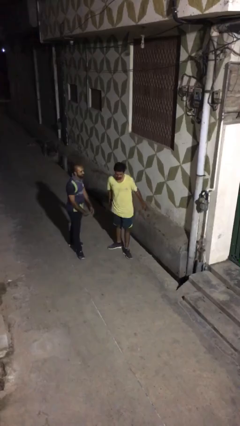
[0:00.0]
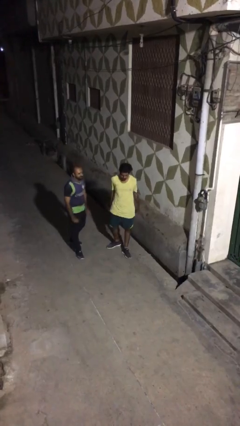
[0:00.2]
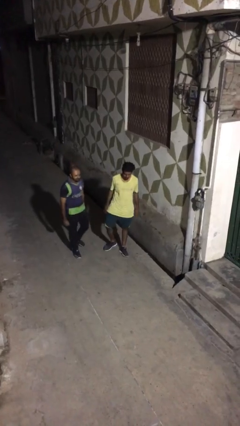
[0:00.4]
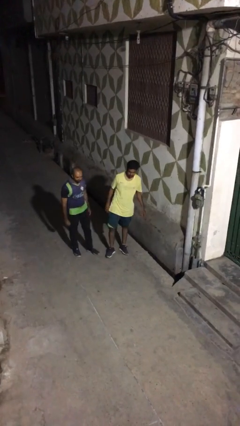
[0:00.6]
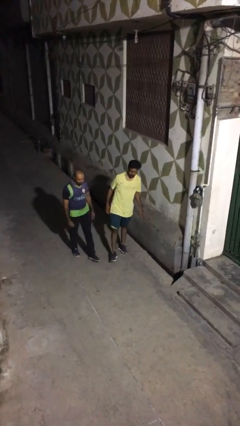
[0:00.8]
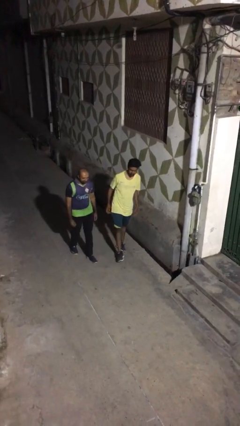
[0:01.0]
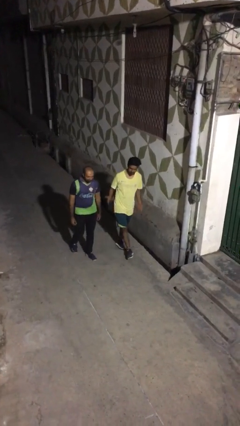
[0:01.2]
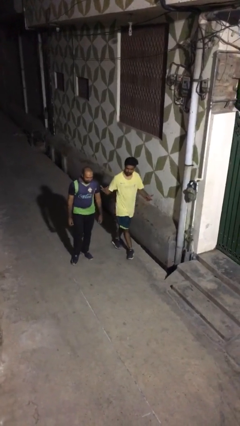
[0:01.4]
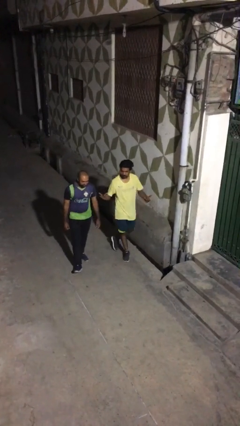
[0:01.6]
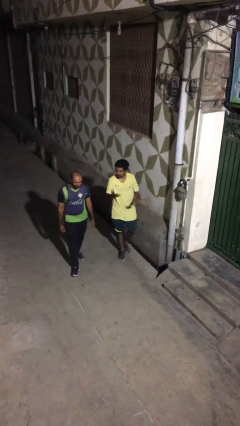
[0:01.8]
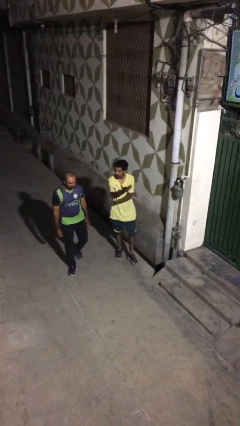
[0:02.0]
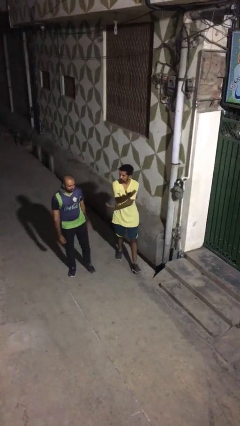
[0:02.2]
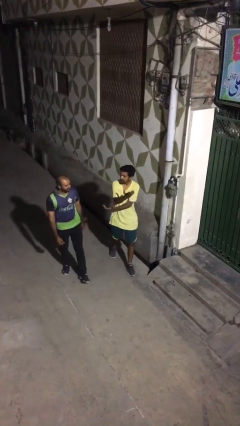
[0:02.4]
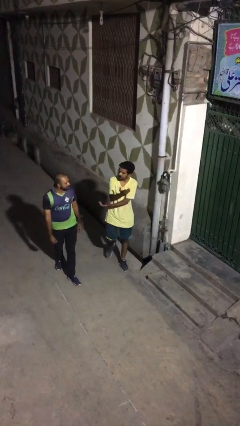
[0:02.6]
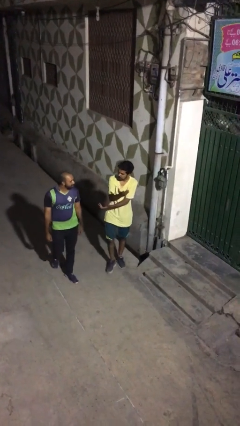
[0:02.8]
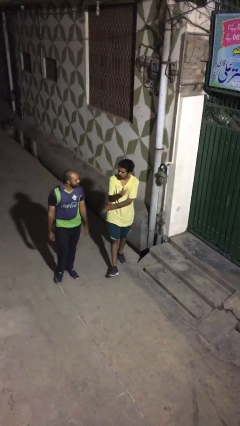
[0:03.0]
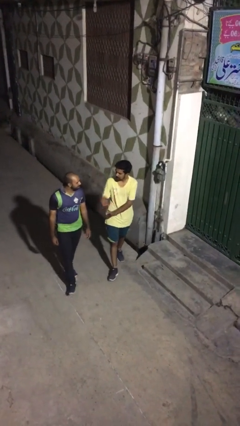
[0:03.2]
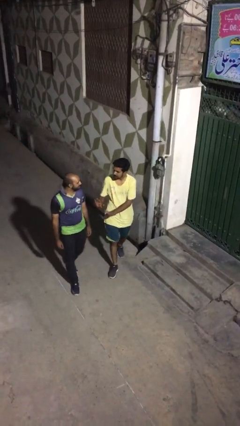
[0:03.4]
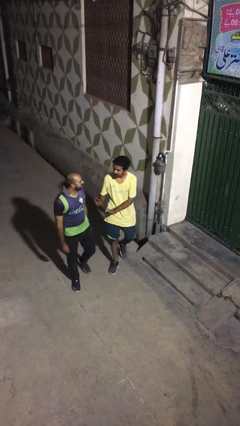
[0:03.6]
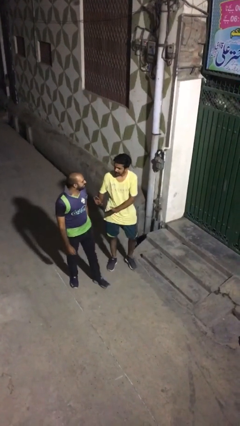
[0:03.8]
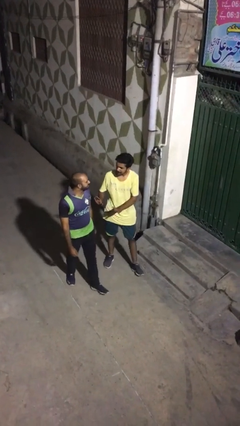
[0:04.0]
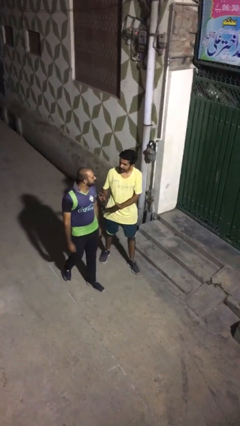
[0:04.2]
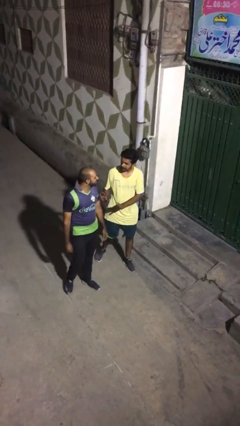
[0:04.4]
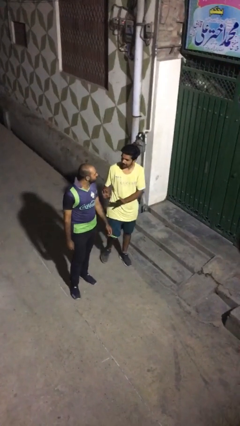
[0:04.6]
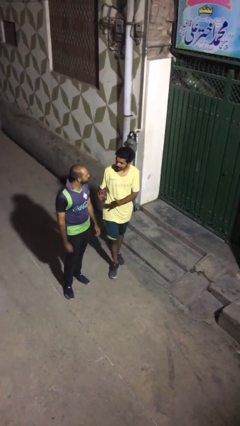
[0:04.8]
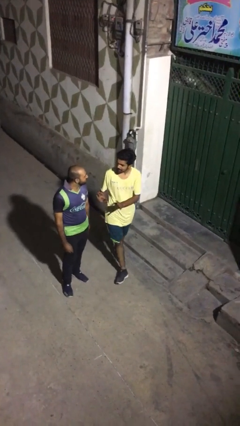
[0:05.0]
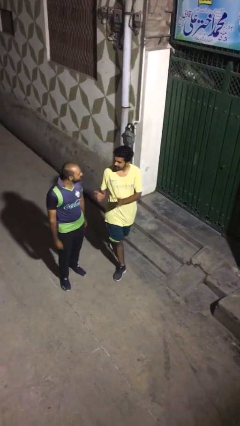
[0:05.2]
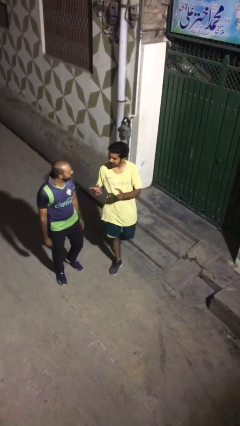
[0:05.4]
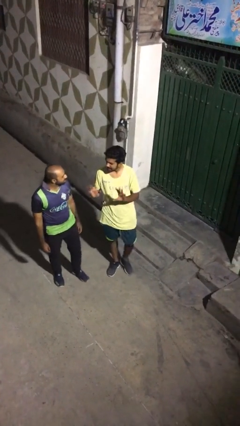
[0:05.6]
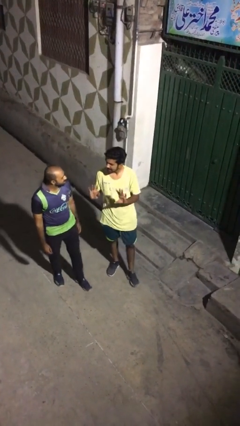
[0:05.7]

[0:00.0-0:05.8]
person talks to person

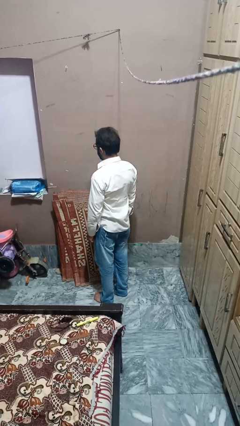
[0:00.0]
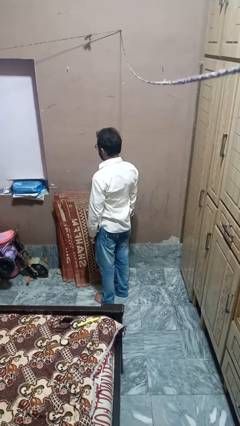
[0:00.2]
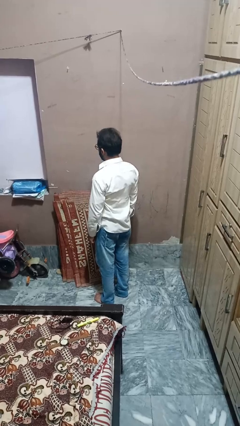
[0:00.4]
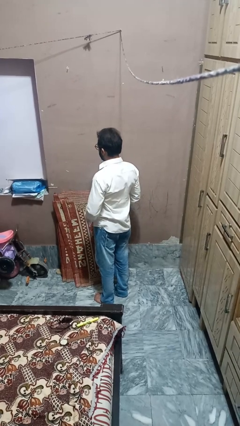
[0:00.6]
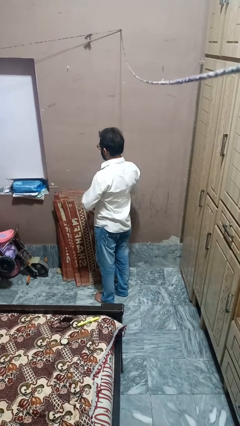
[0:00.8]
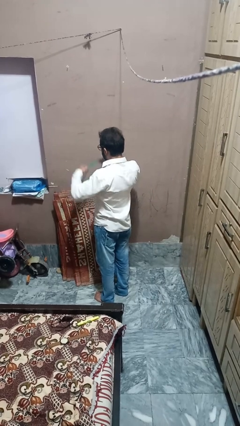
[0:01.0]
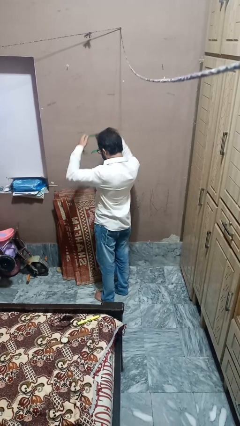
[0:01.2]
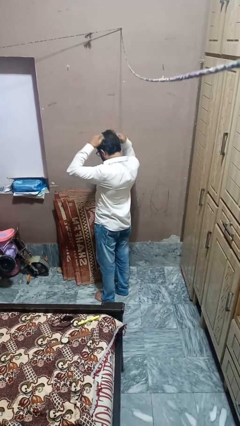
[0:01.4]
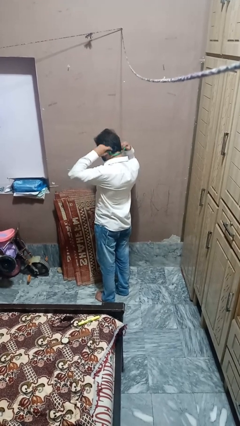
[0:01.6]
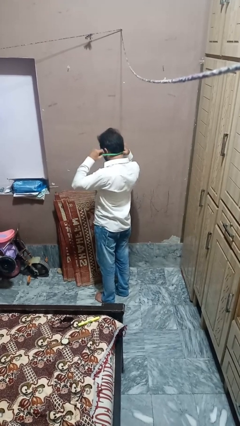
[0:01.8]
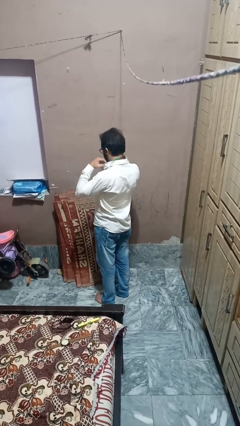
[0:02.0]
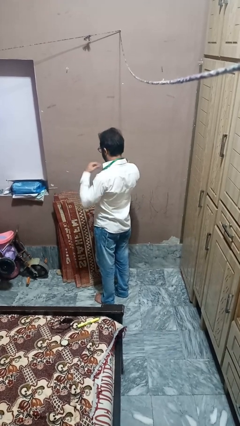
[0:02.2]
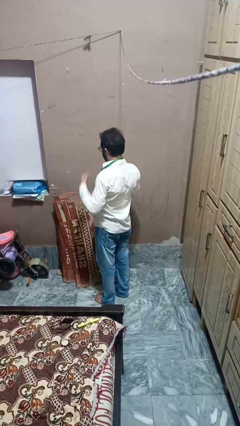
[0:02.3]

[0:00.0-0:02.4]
person puts on necklace

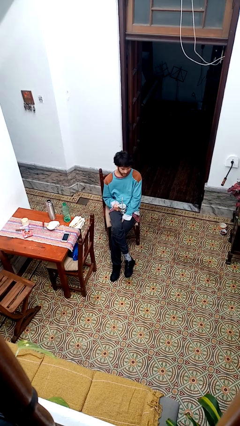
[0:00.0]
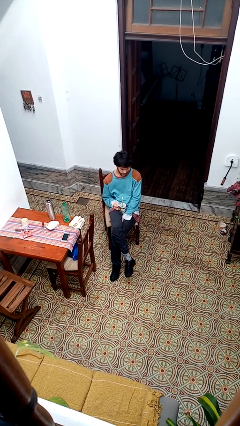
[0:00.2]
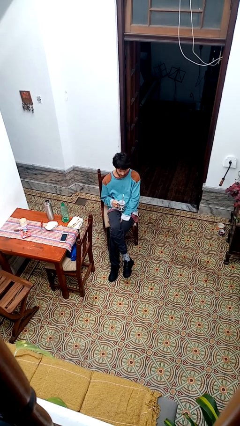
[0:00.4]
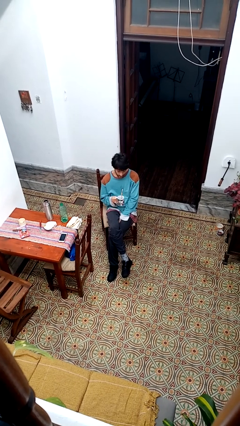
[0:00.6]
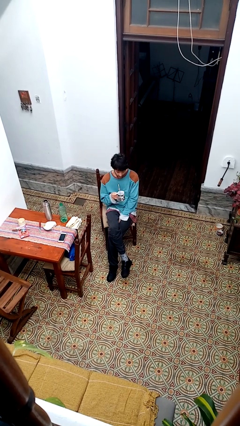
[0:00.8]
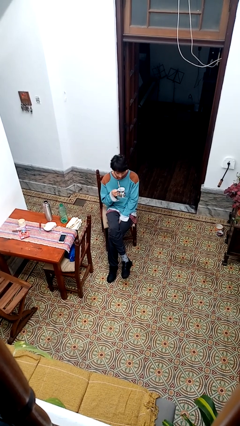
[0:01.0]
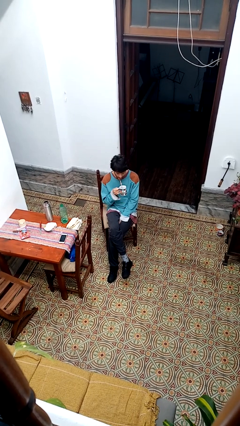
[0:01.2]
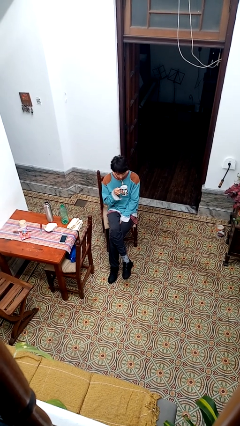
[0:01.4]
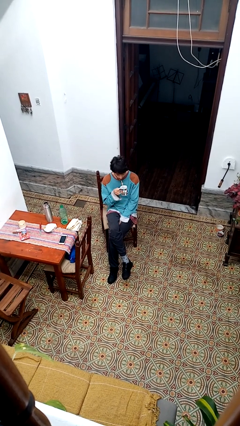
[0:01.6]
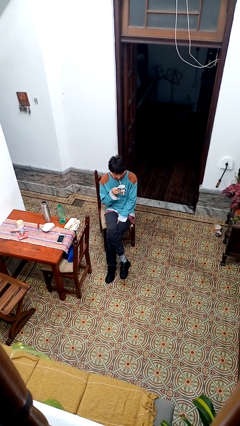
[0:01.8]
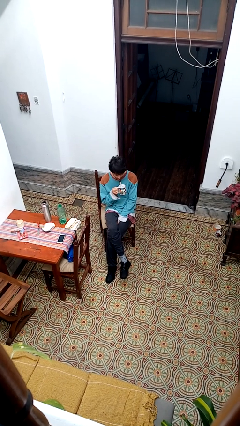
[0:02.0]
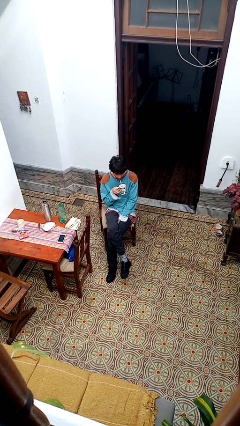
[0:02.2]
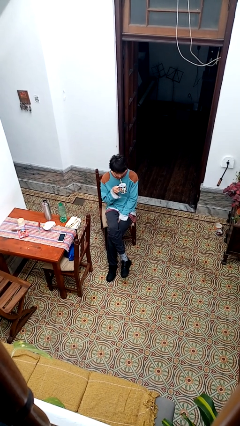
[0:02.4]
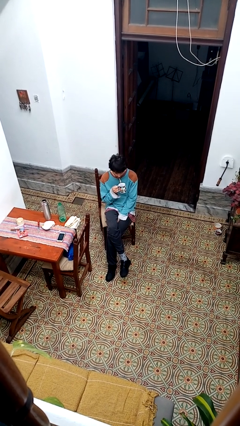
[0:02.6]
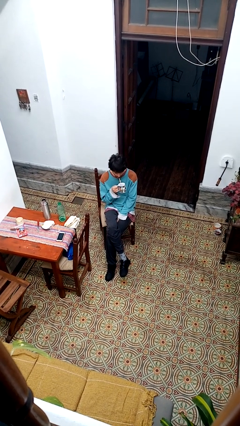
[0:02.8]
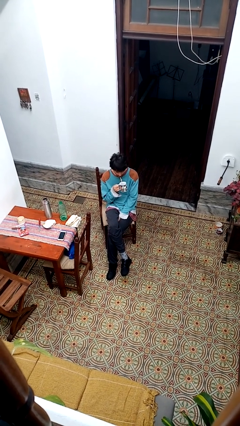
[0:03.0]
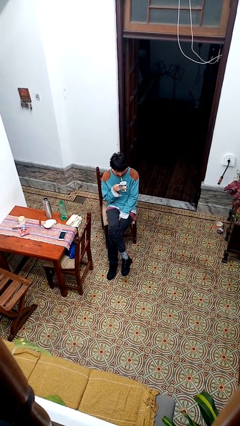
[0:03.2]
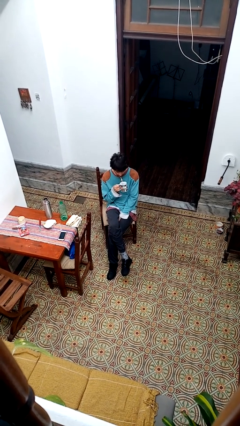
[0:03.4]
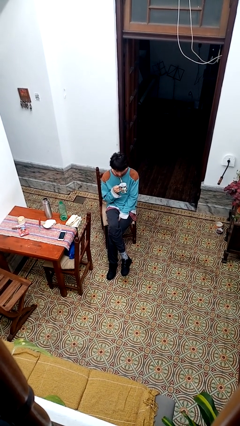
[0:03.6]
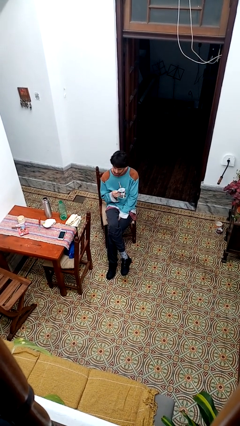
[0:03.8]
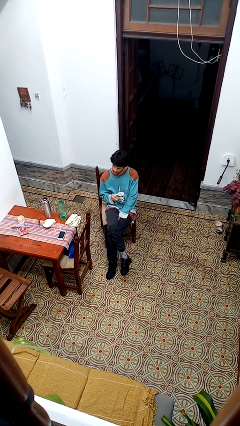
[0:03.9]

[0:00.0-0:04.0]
person drinks from straw

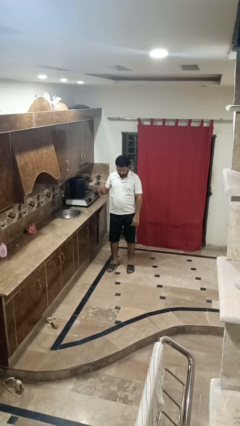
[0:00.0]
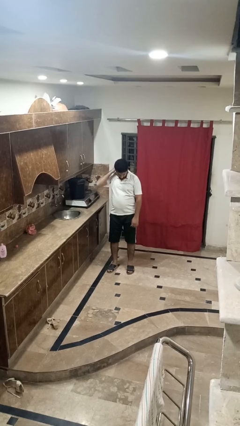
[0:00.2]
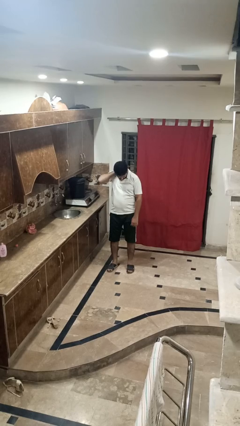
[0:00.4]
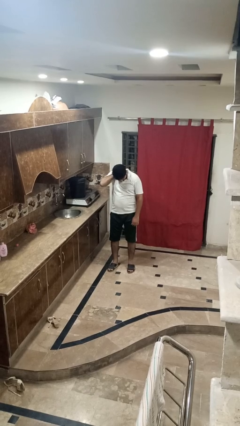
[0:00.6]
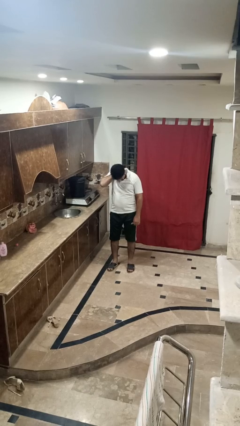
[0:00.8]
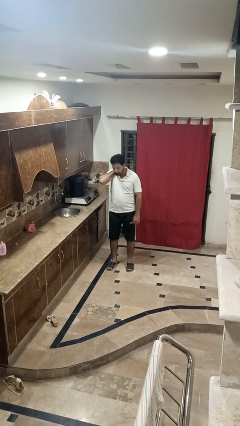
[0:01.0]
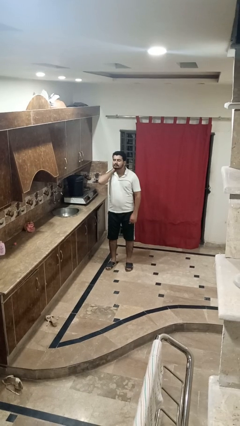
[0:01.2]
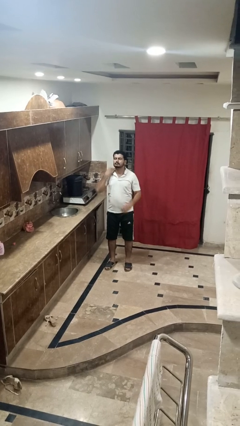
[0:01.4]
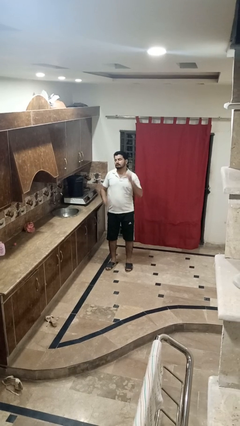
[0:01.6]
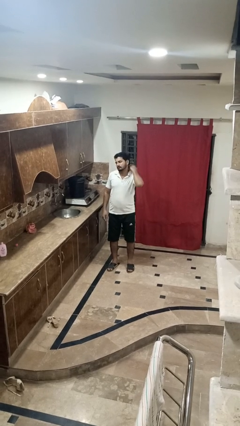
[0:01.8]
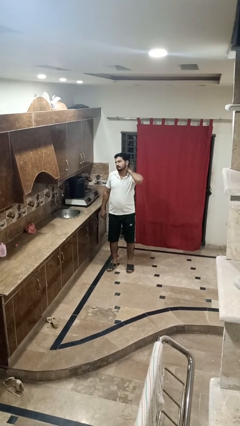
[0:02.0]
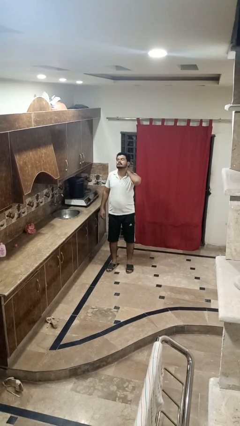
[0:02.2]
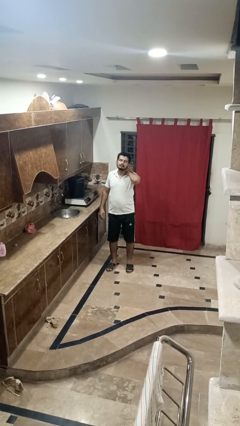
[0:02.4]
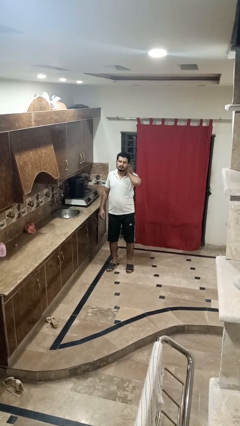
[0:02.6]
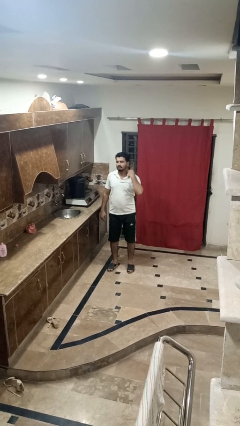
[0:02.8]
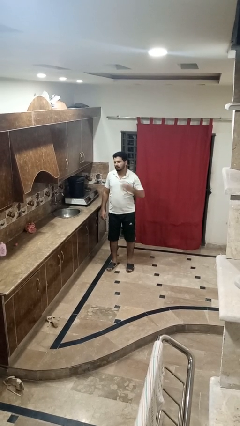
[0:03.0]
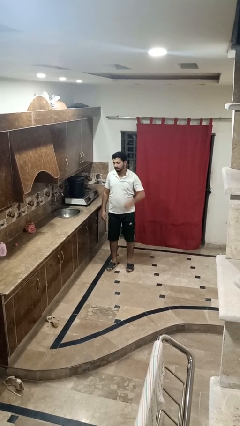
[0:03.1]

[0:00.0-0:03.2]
person rubs neck

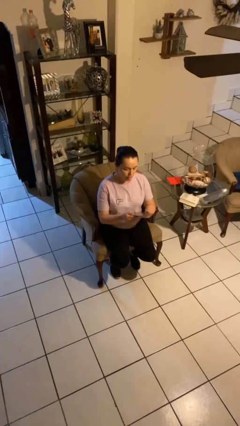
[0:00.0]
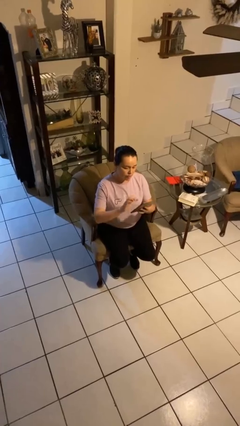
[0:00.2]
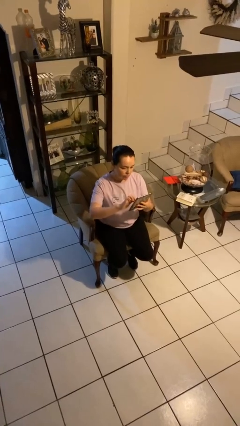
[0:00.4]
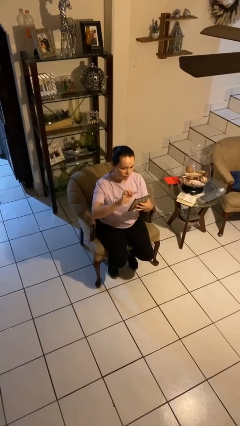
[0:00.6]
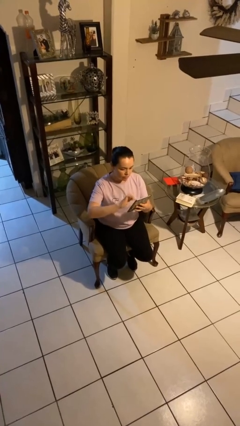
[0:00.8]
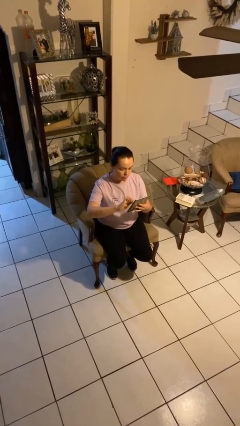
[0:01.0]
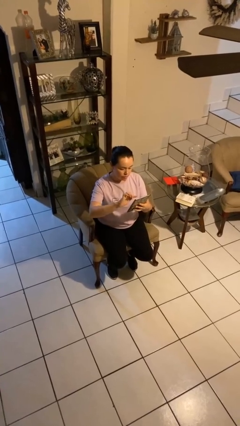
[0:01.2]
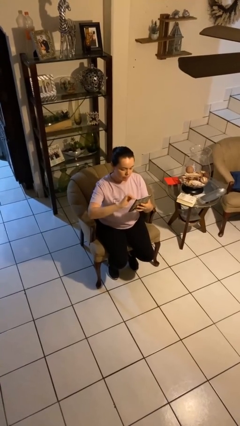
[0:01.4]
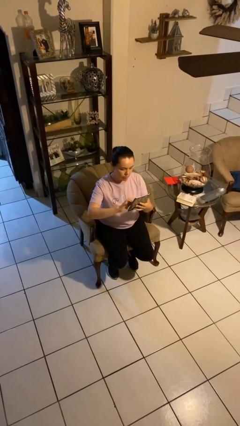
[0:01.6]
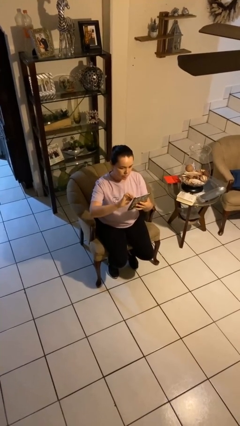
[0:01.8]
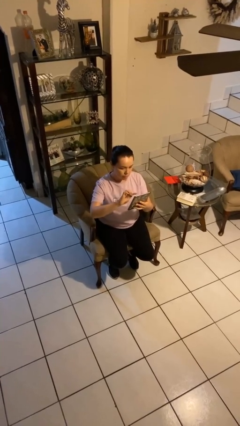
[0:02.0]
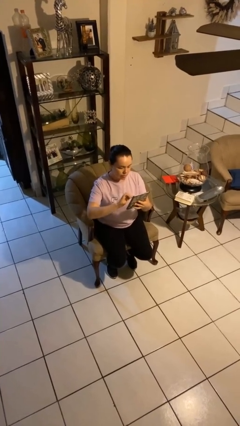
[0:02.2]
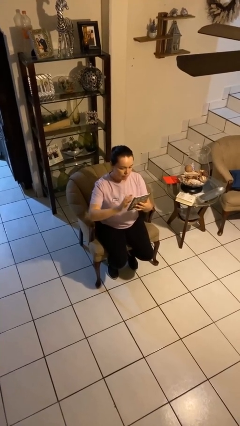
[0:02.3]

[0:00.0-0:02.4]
person interacts with tablet
